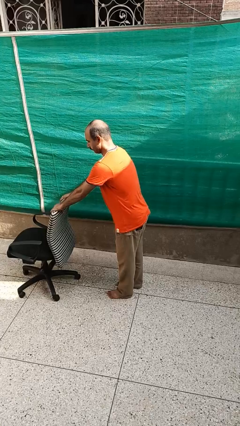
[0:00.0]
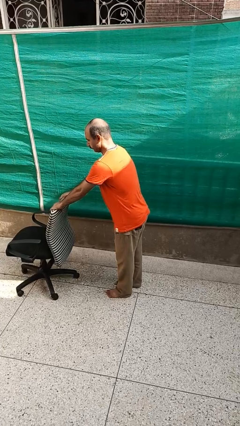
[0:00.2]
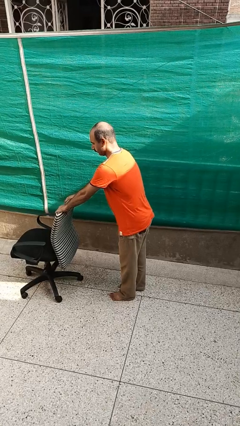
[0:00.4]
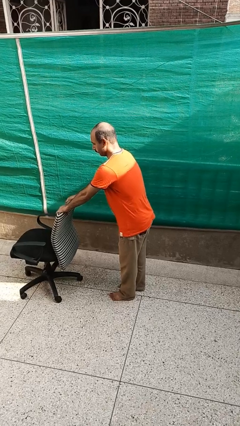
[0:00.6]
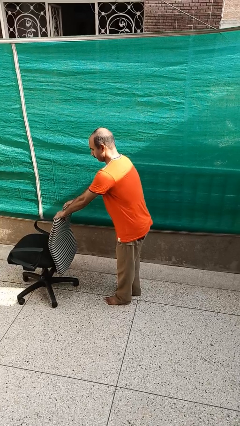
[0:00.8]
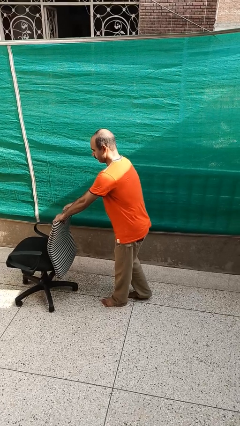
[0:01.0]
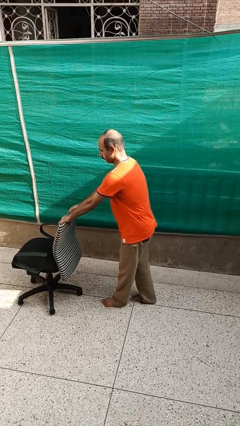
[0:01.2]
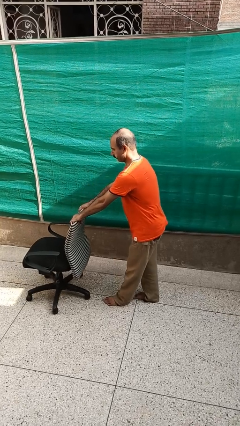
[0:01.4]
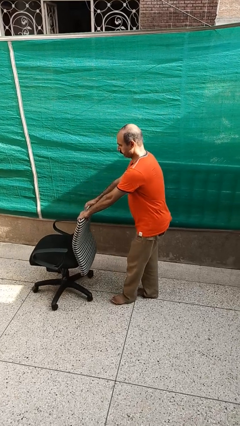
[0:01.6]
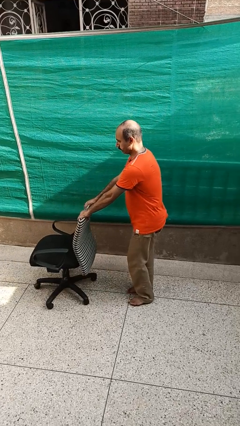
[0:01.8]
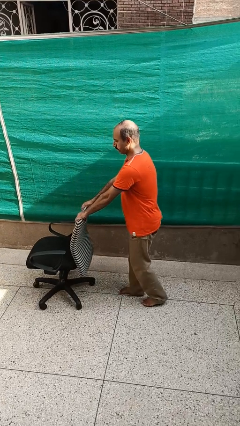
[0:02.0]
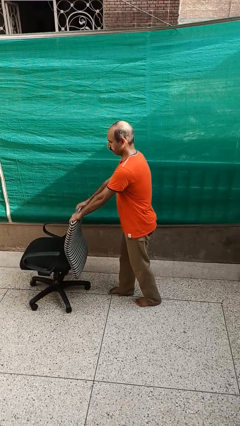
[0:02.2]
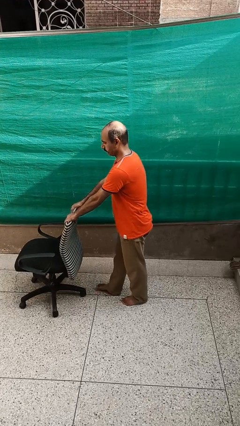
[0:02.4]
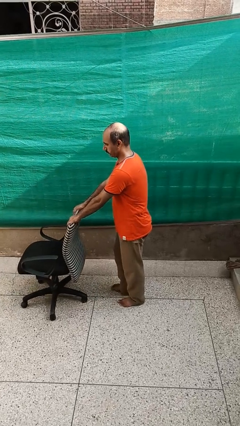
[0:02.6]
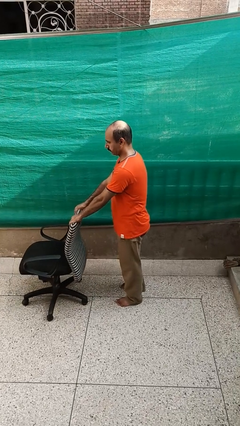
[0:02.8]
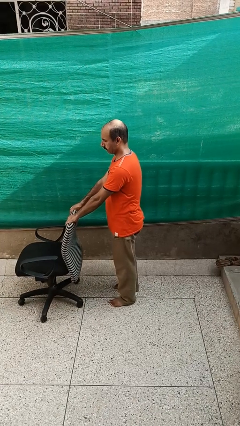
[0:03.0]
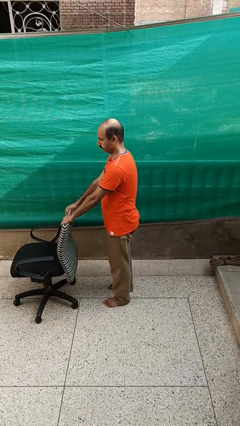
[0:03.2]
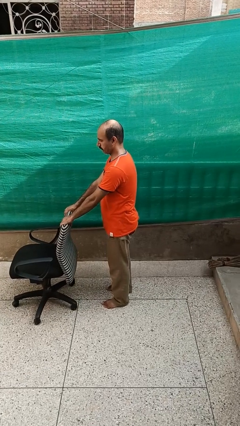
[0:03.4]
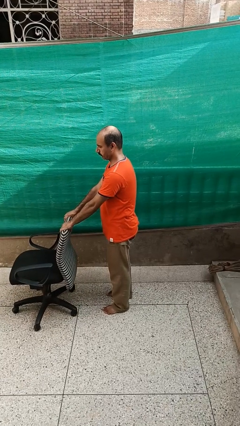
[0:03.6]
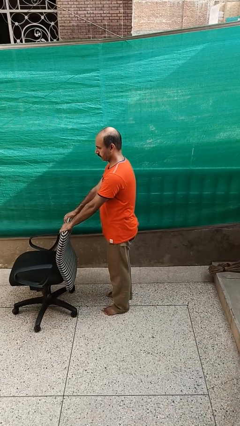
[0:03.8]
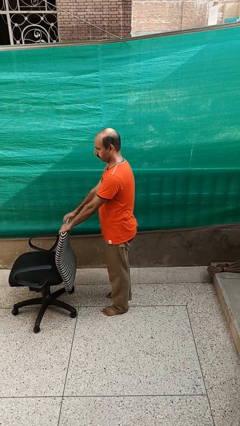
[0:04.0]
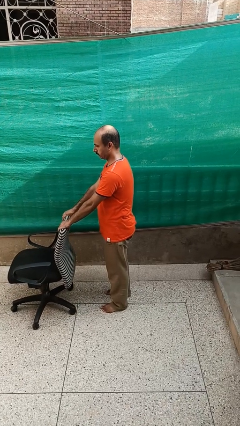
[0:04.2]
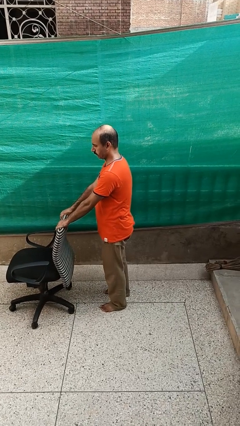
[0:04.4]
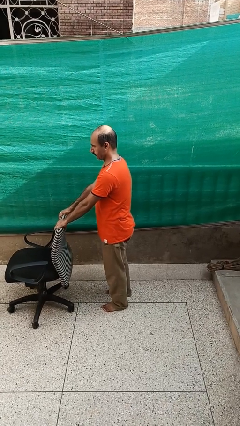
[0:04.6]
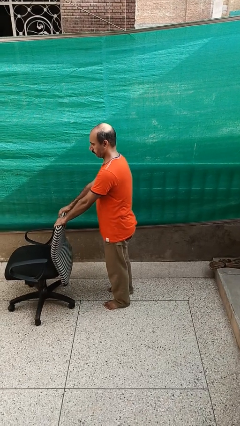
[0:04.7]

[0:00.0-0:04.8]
person pulls wheeled cart

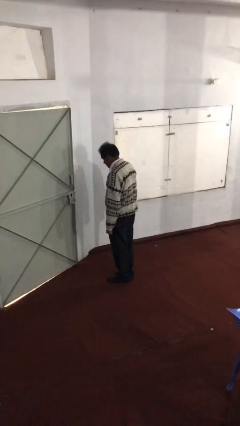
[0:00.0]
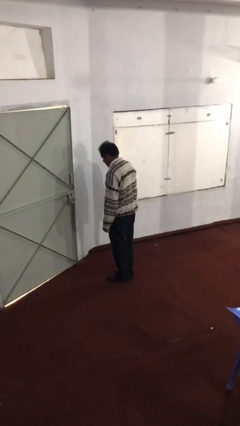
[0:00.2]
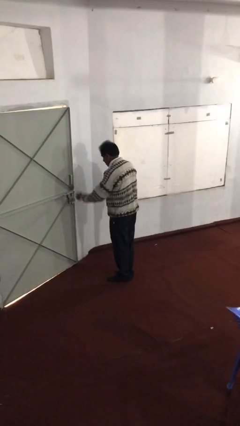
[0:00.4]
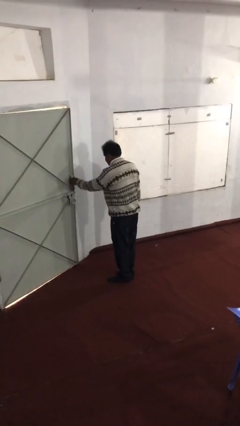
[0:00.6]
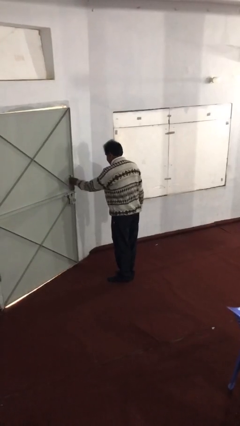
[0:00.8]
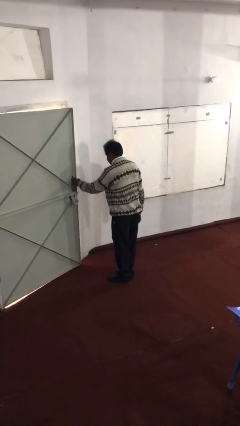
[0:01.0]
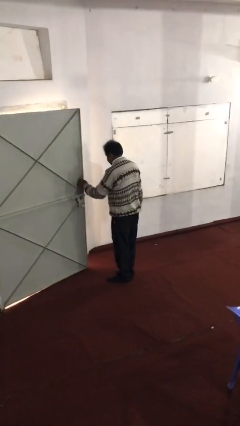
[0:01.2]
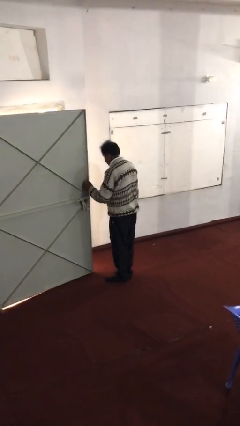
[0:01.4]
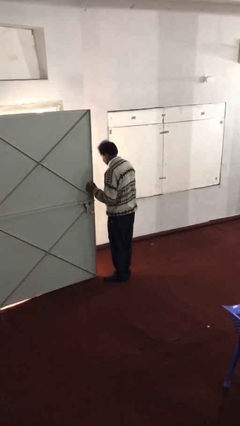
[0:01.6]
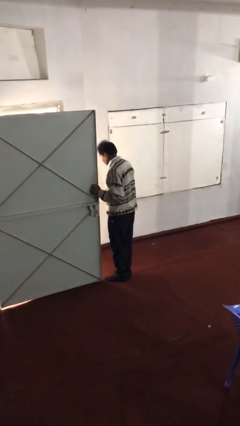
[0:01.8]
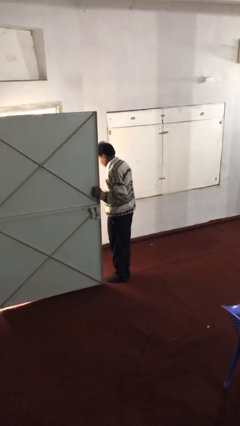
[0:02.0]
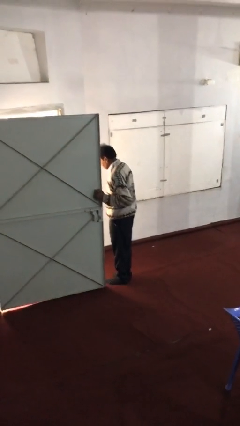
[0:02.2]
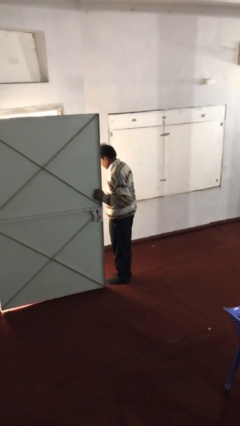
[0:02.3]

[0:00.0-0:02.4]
person opens facility door

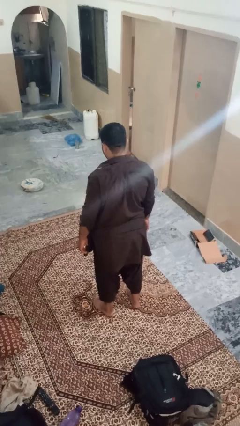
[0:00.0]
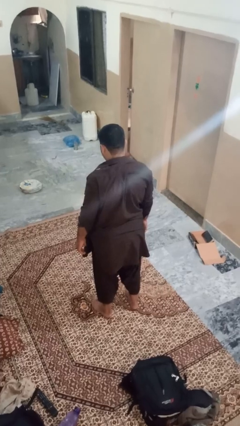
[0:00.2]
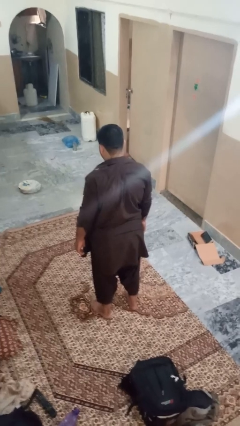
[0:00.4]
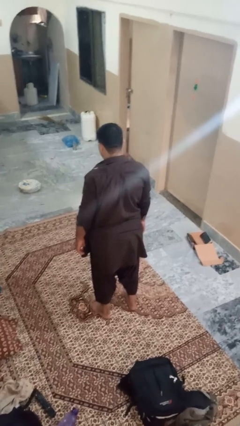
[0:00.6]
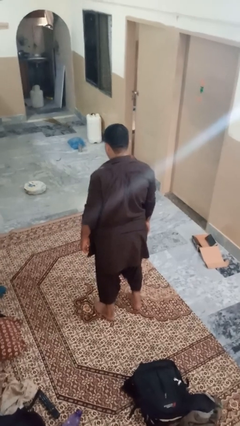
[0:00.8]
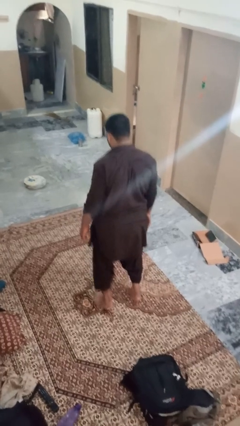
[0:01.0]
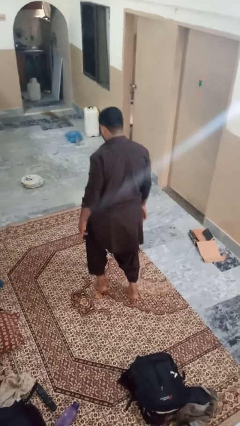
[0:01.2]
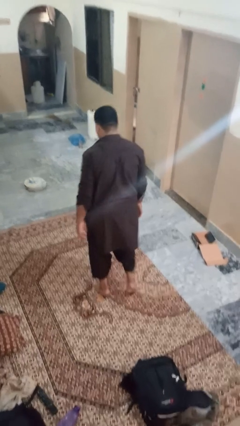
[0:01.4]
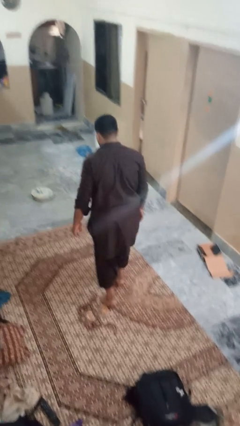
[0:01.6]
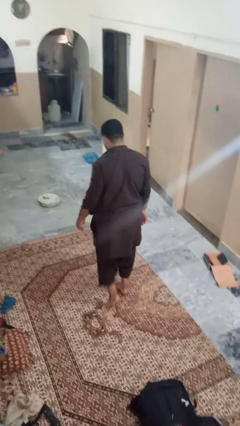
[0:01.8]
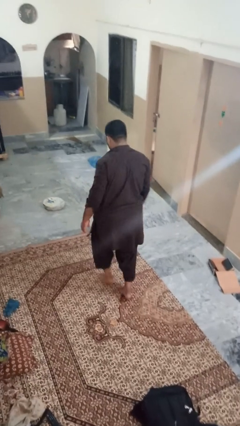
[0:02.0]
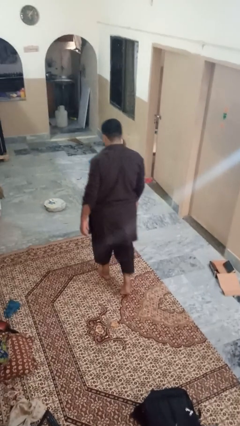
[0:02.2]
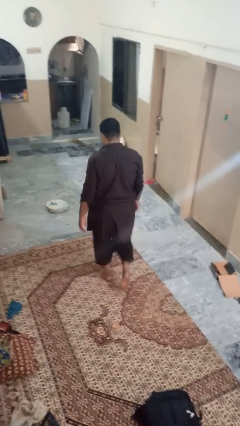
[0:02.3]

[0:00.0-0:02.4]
person walks tiptoe

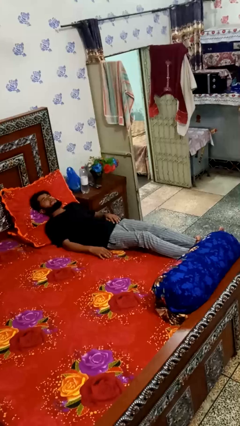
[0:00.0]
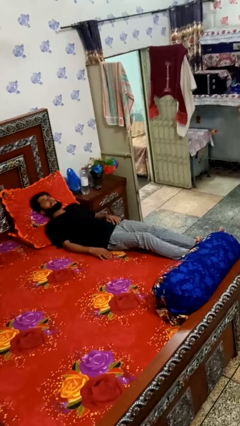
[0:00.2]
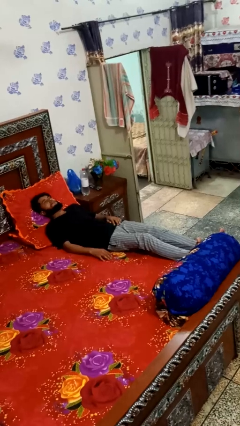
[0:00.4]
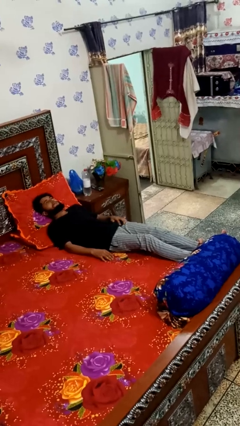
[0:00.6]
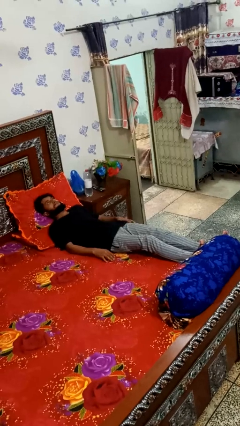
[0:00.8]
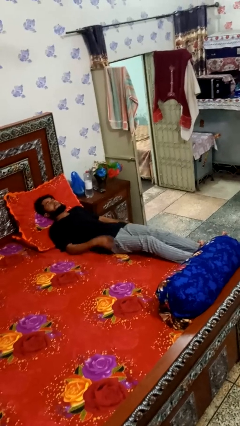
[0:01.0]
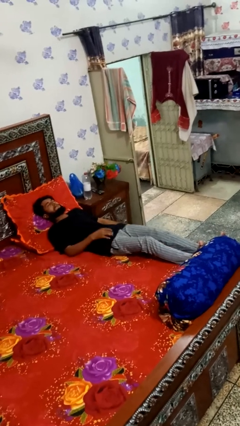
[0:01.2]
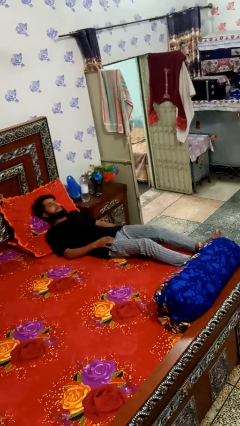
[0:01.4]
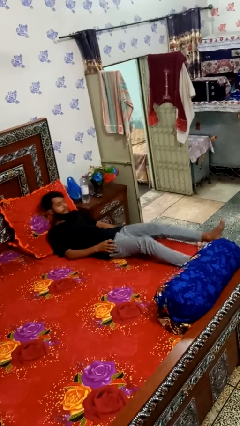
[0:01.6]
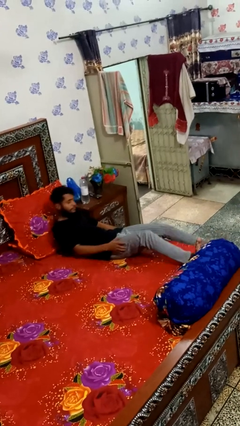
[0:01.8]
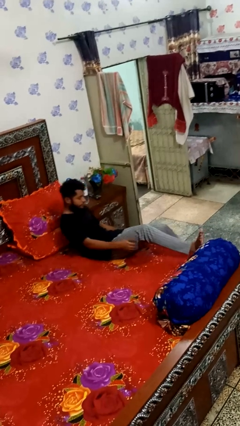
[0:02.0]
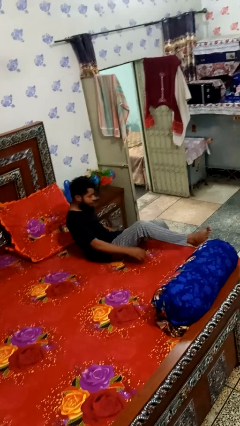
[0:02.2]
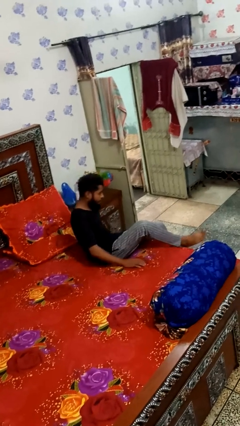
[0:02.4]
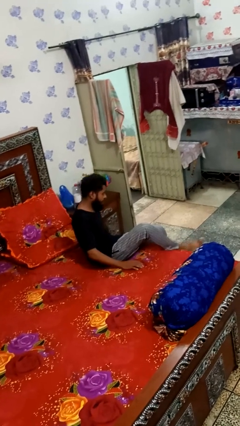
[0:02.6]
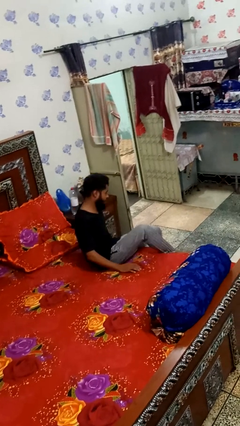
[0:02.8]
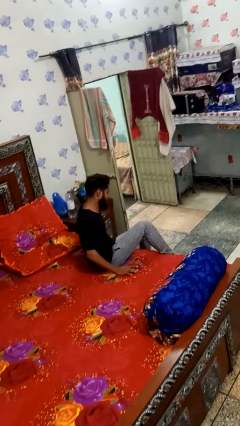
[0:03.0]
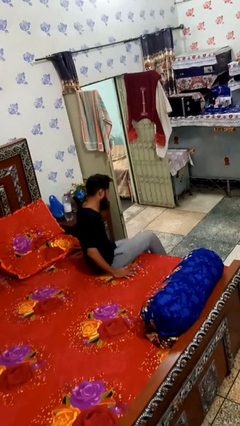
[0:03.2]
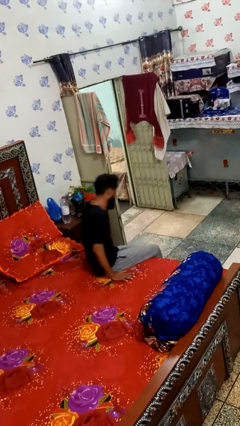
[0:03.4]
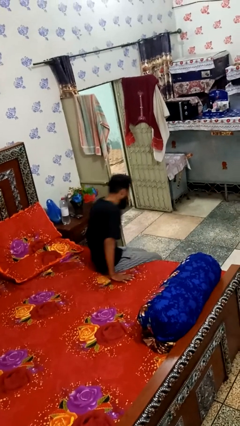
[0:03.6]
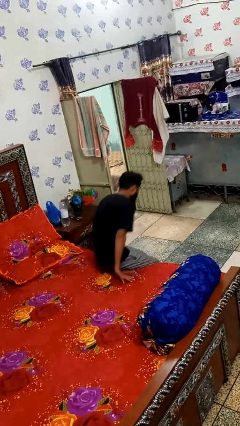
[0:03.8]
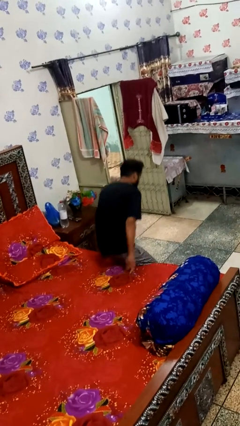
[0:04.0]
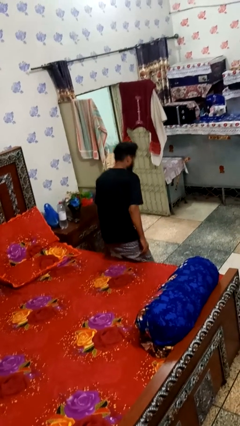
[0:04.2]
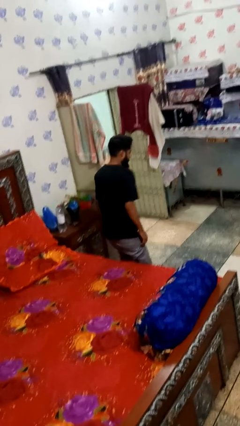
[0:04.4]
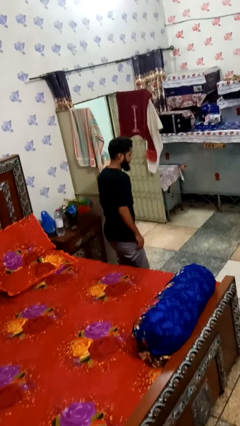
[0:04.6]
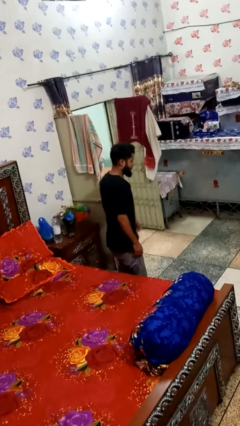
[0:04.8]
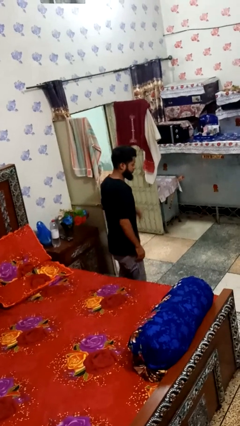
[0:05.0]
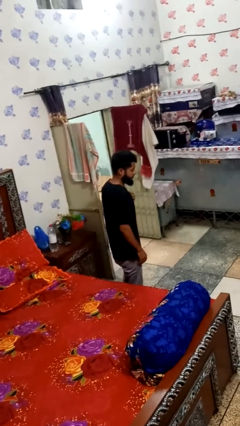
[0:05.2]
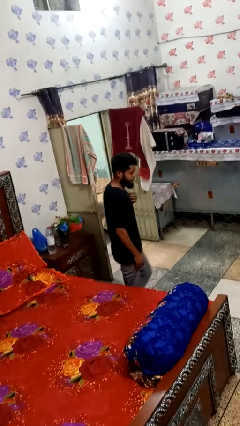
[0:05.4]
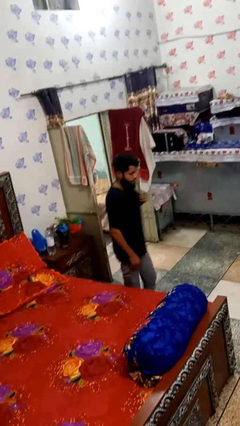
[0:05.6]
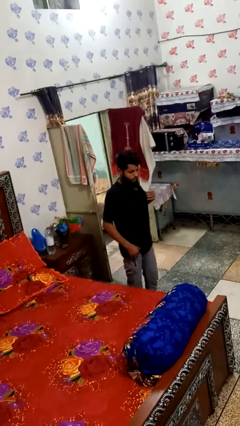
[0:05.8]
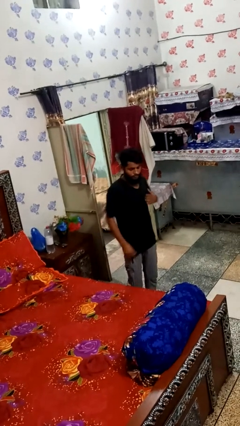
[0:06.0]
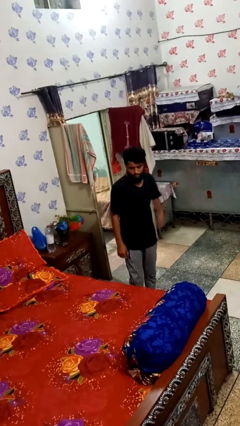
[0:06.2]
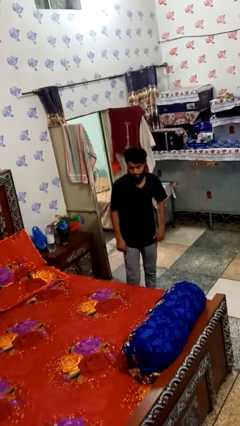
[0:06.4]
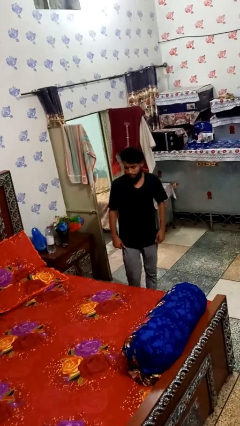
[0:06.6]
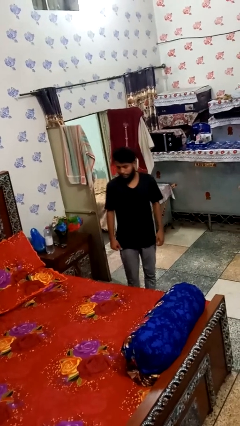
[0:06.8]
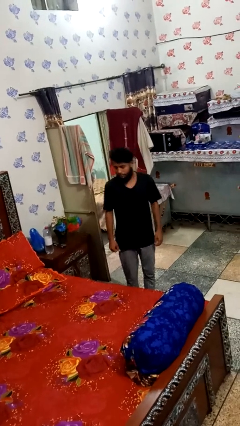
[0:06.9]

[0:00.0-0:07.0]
person stands up

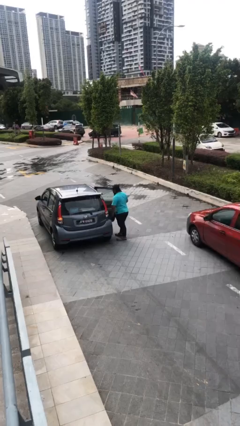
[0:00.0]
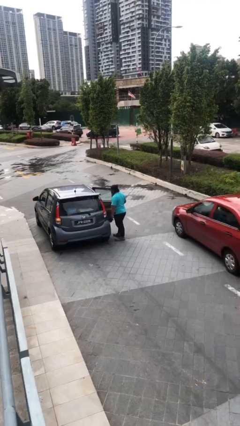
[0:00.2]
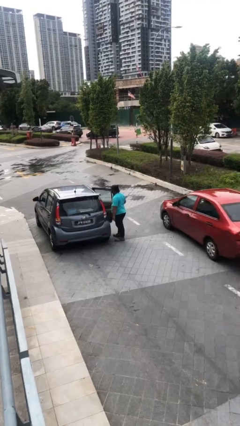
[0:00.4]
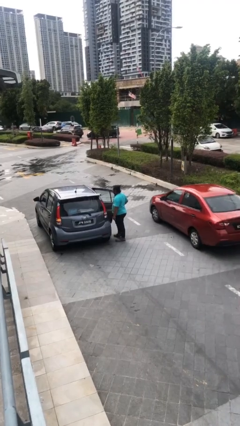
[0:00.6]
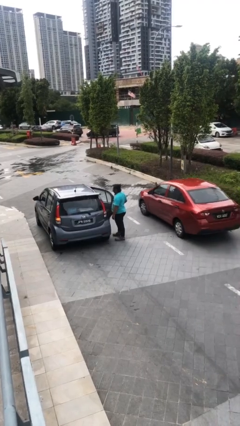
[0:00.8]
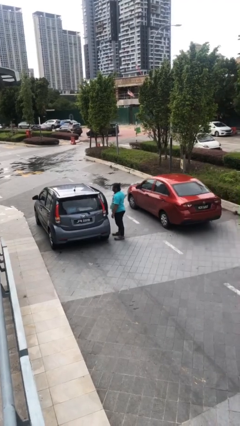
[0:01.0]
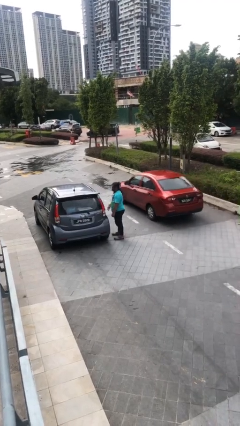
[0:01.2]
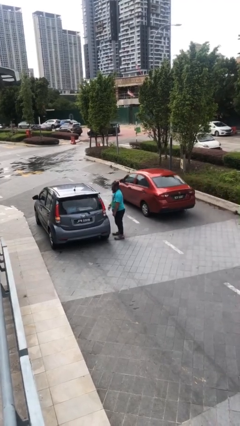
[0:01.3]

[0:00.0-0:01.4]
person closes car door
